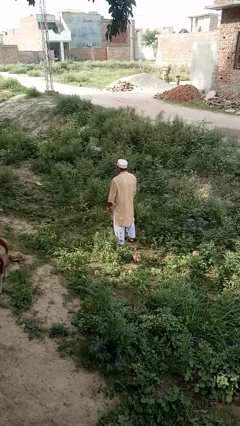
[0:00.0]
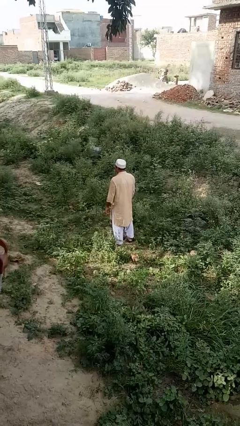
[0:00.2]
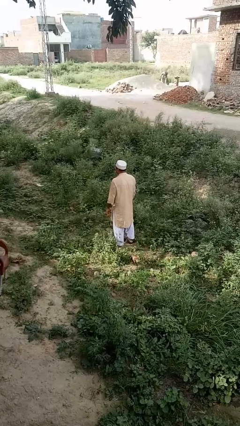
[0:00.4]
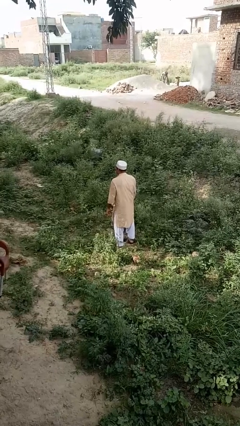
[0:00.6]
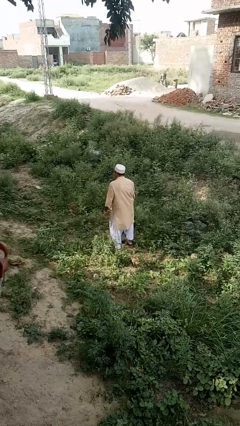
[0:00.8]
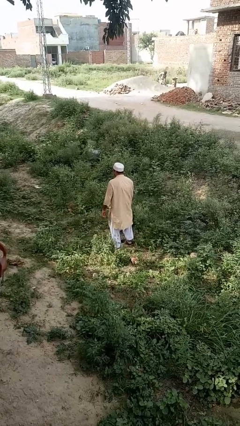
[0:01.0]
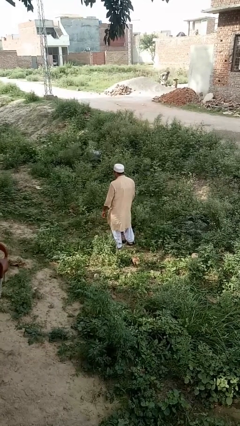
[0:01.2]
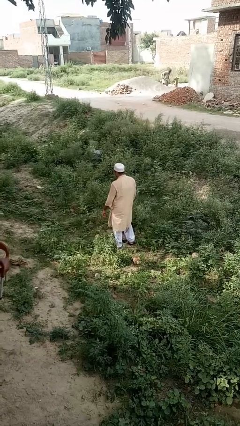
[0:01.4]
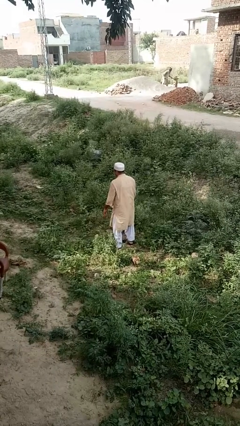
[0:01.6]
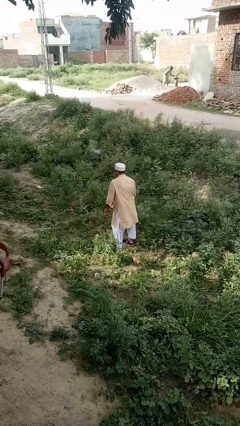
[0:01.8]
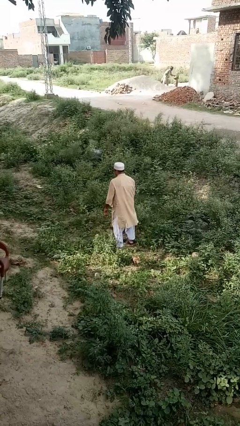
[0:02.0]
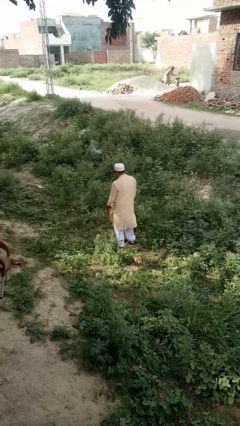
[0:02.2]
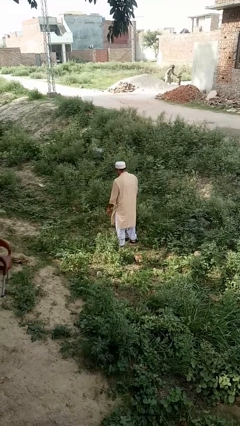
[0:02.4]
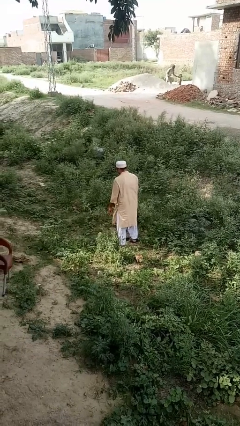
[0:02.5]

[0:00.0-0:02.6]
person wiggles hips

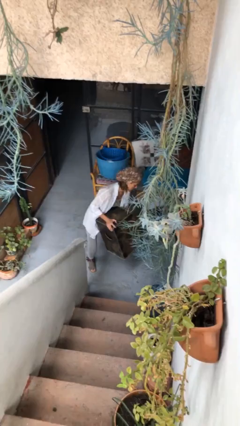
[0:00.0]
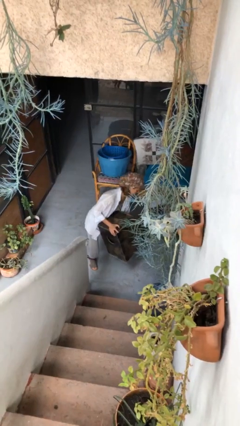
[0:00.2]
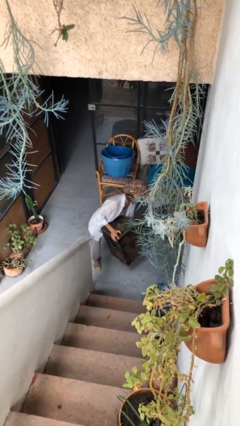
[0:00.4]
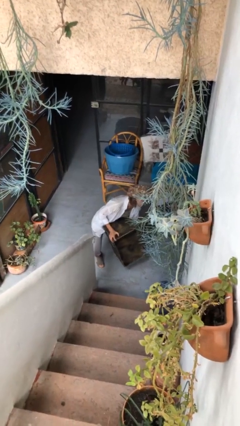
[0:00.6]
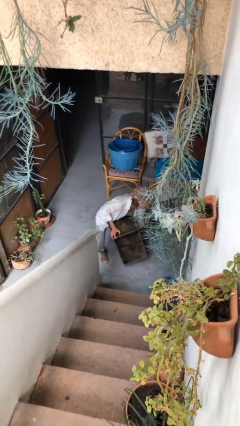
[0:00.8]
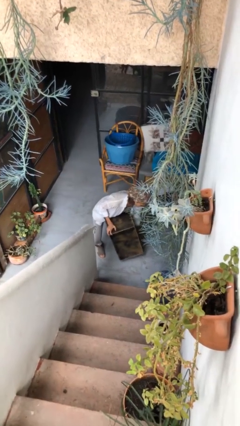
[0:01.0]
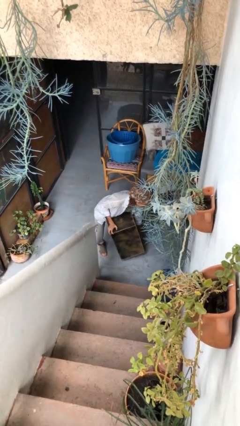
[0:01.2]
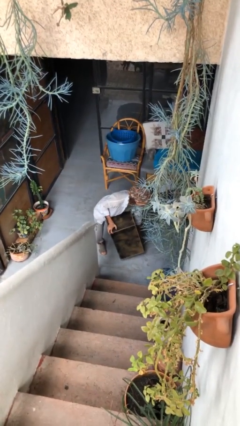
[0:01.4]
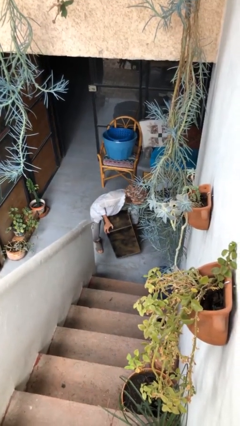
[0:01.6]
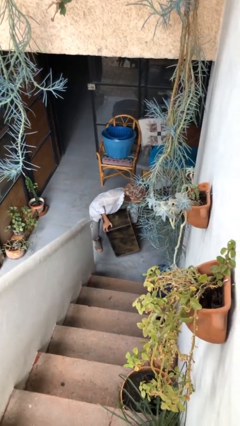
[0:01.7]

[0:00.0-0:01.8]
person puts down object on floor

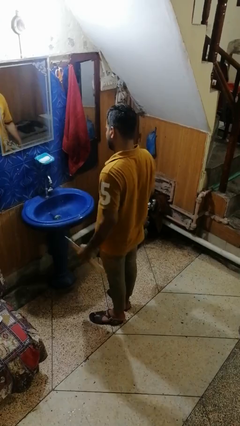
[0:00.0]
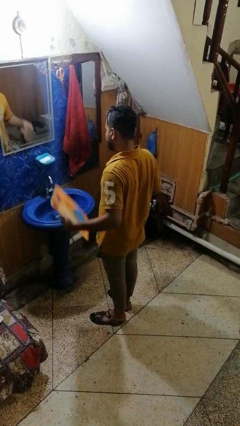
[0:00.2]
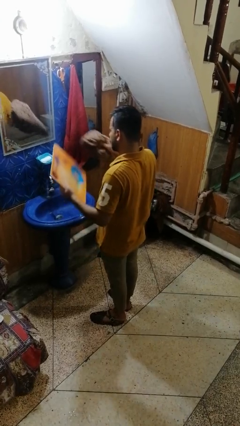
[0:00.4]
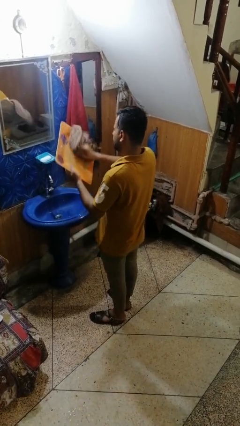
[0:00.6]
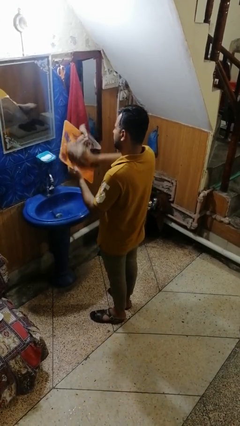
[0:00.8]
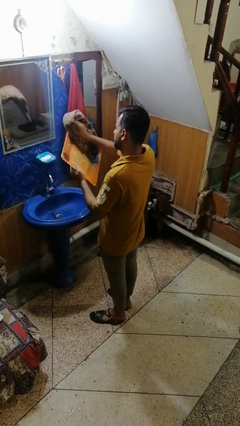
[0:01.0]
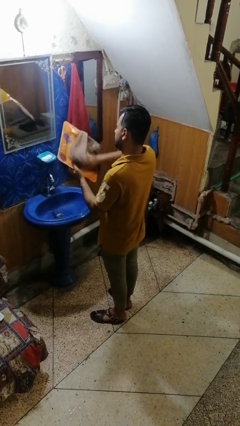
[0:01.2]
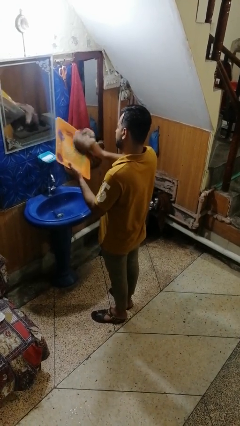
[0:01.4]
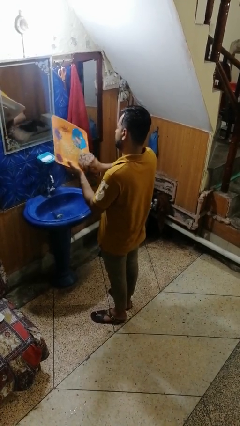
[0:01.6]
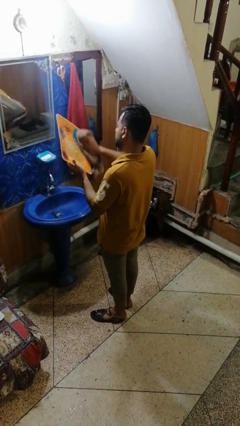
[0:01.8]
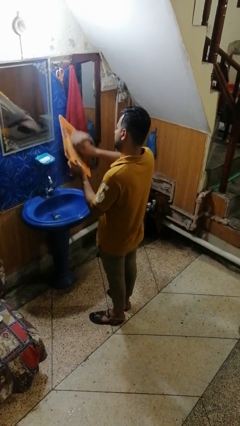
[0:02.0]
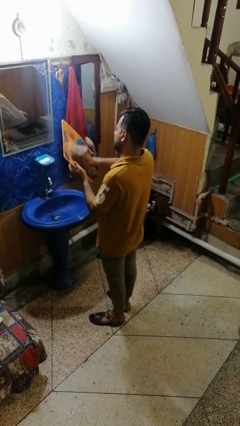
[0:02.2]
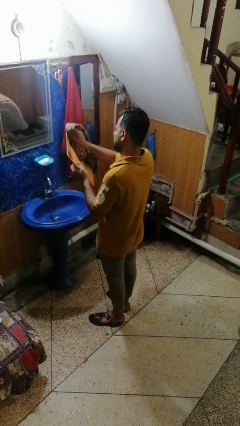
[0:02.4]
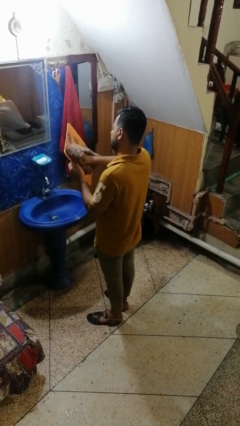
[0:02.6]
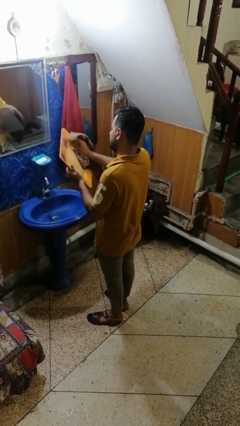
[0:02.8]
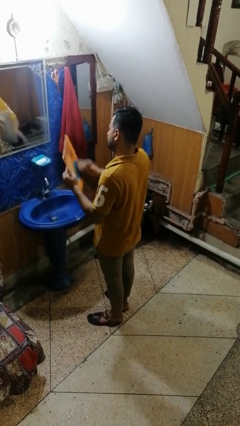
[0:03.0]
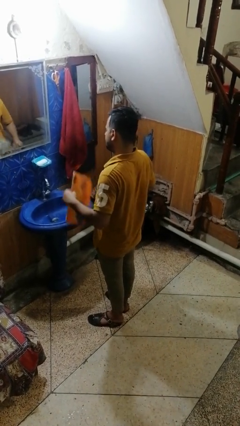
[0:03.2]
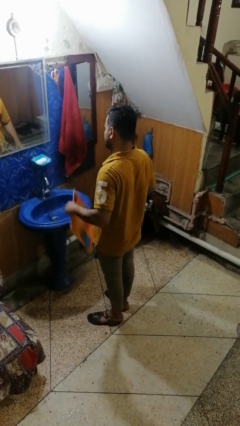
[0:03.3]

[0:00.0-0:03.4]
person dries dish

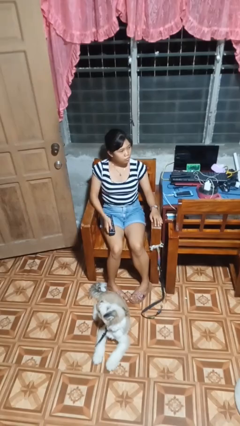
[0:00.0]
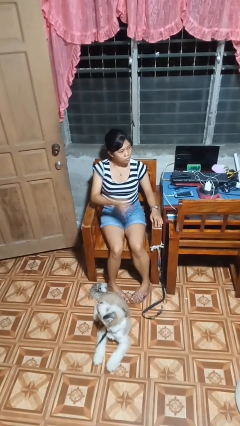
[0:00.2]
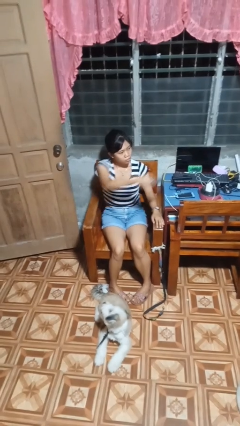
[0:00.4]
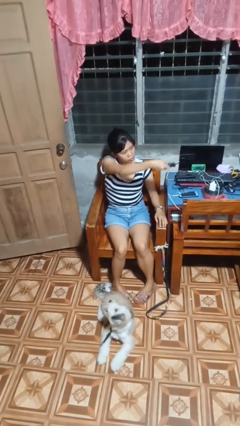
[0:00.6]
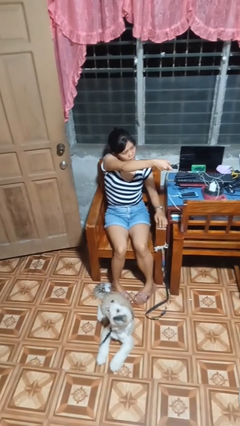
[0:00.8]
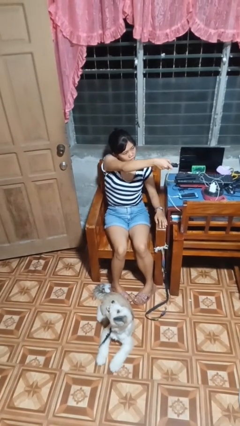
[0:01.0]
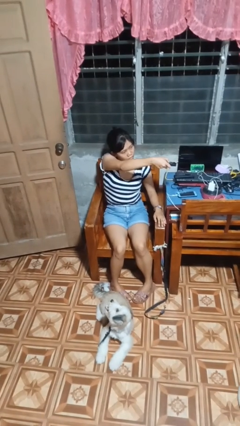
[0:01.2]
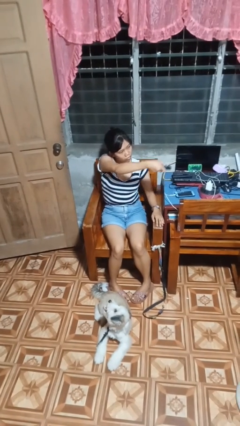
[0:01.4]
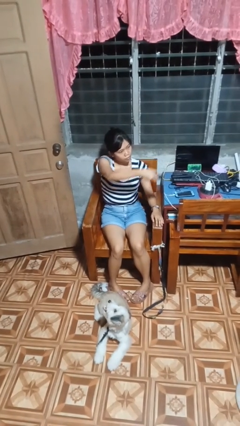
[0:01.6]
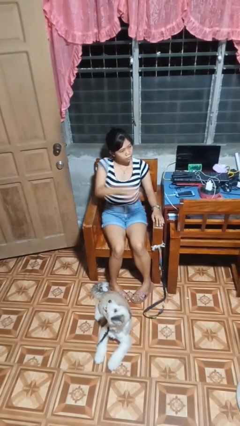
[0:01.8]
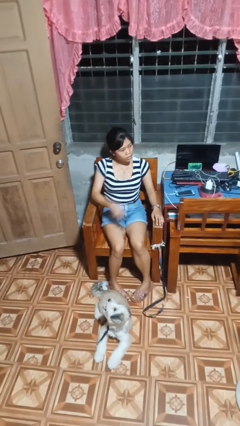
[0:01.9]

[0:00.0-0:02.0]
person uses television remote

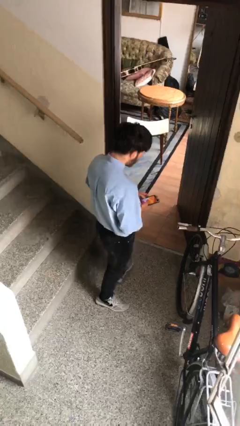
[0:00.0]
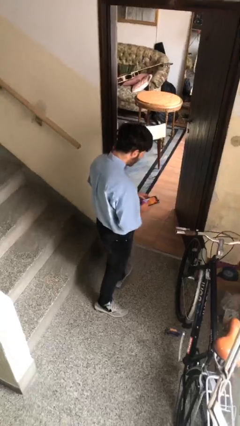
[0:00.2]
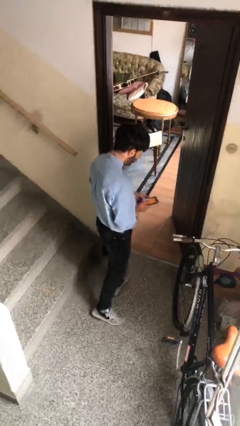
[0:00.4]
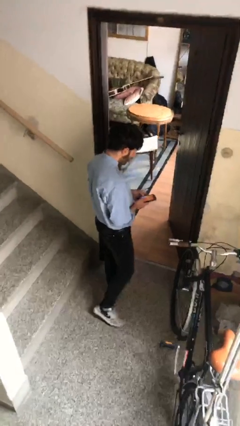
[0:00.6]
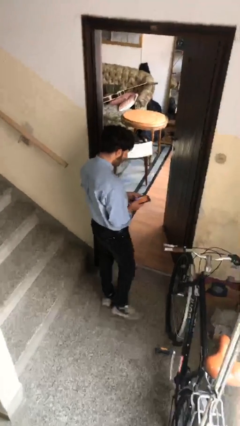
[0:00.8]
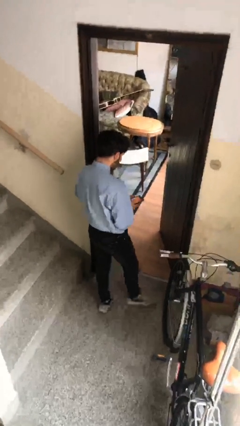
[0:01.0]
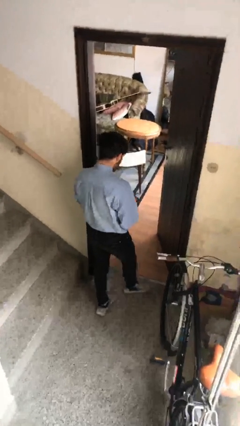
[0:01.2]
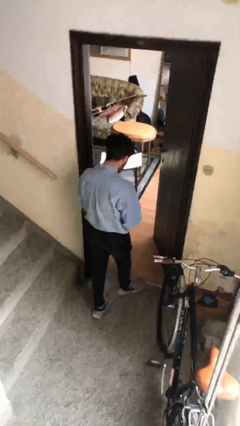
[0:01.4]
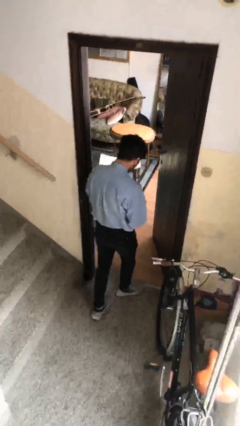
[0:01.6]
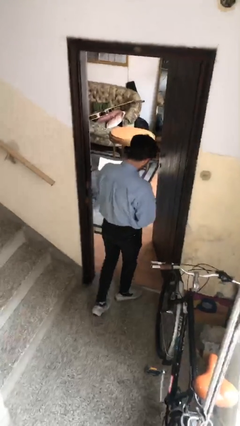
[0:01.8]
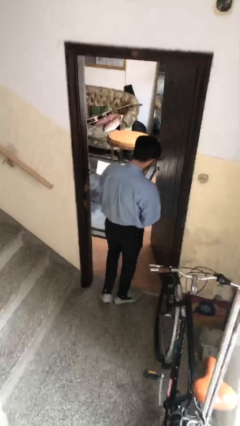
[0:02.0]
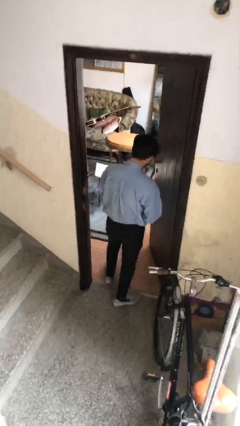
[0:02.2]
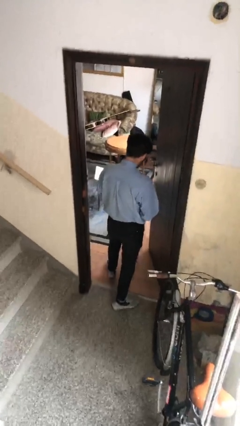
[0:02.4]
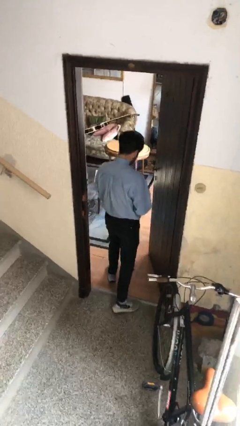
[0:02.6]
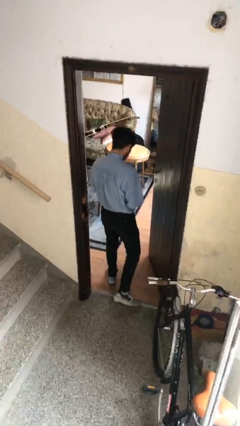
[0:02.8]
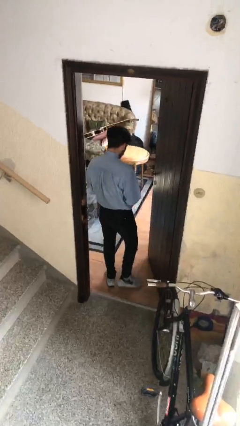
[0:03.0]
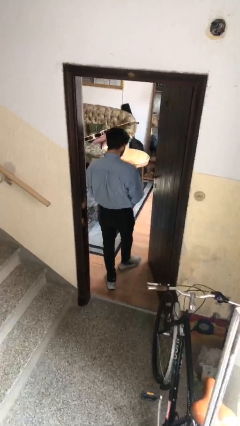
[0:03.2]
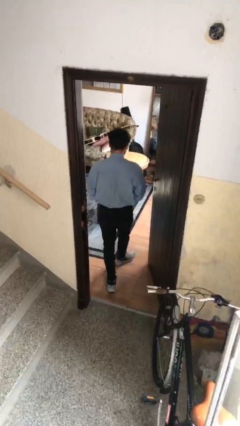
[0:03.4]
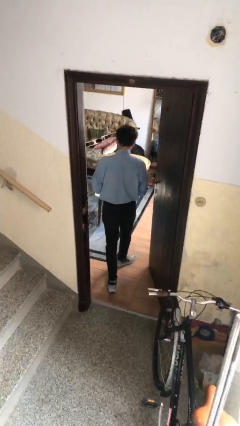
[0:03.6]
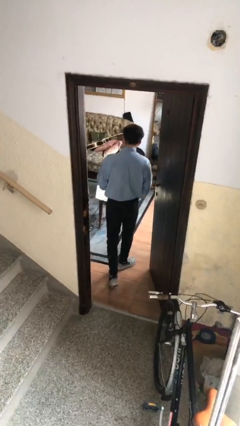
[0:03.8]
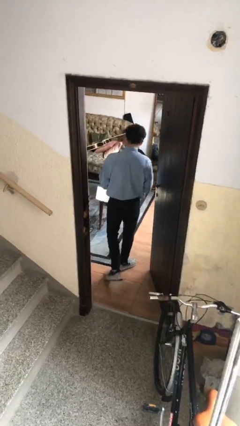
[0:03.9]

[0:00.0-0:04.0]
person exits scene through structure

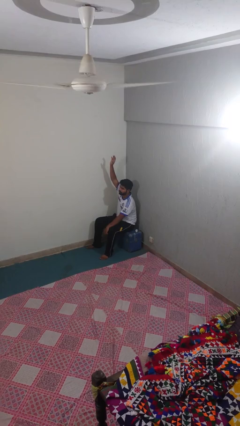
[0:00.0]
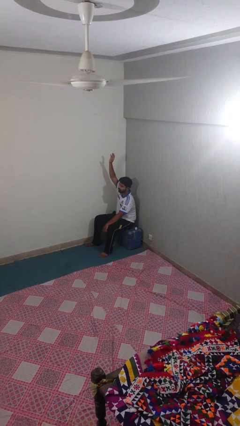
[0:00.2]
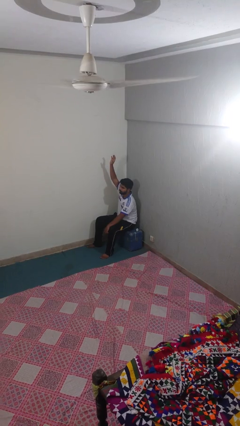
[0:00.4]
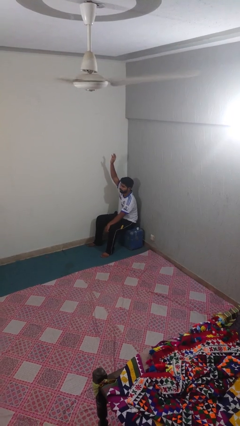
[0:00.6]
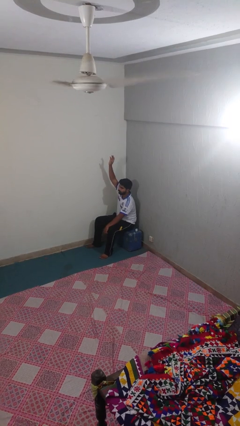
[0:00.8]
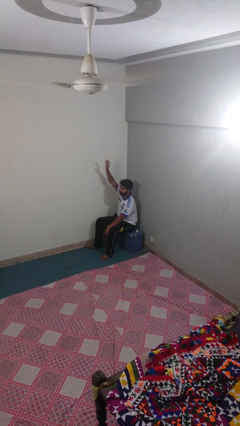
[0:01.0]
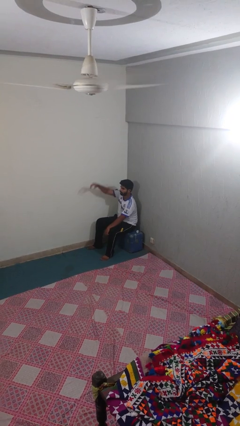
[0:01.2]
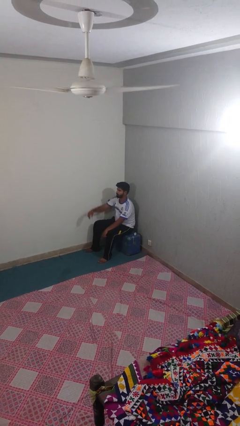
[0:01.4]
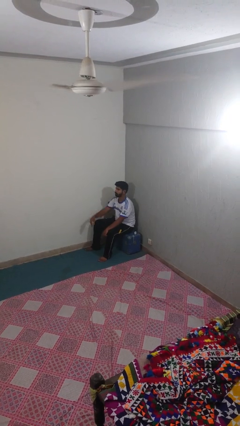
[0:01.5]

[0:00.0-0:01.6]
person gestures lower hand

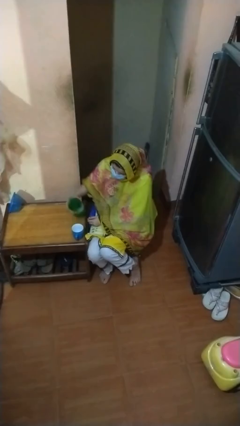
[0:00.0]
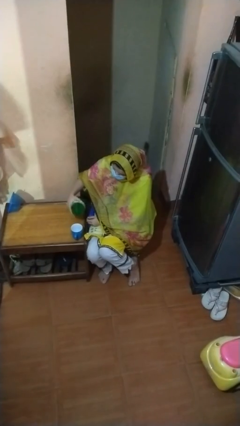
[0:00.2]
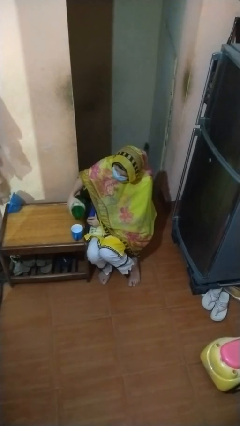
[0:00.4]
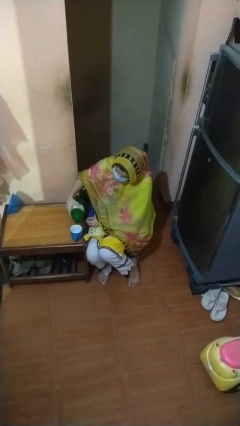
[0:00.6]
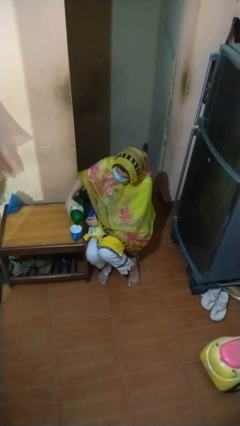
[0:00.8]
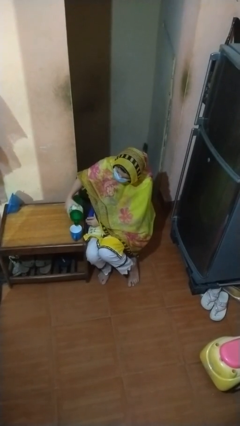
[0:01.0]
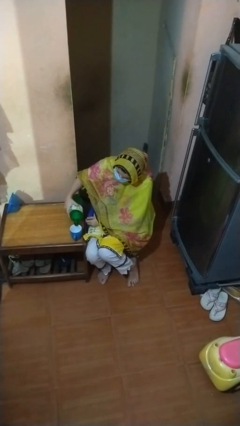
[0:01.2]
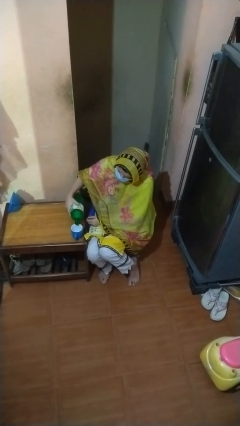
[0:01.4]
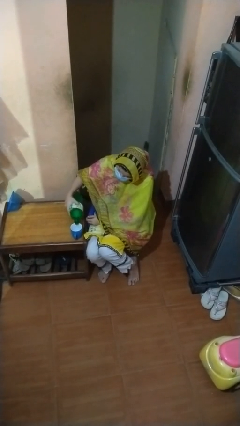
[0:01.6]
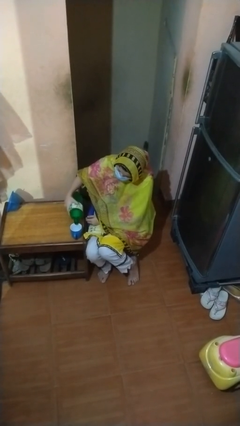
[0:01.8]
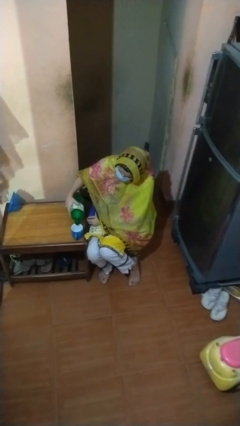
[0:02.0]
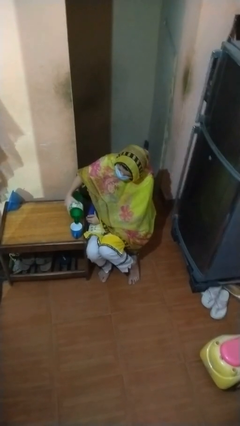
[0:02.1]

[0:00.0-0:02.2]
person pours liquid into cup
